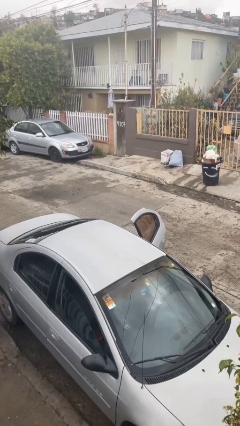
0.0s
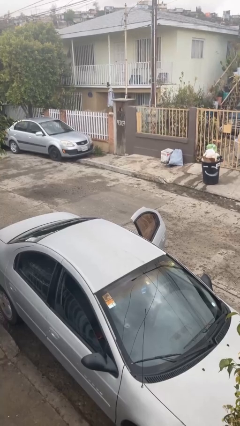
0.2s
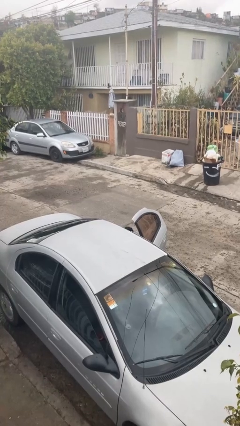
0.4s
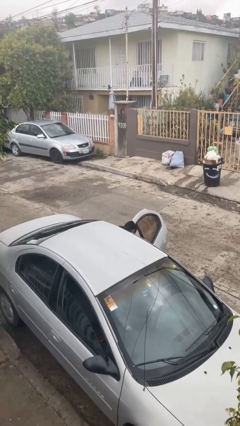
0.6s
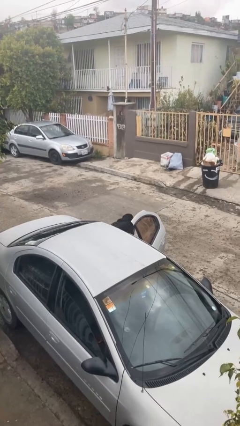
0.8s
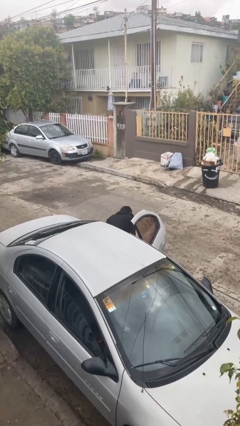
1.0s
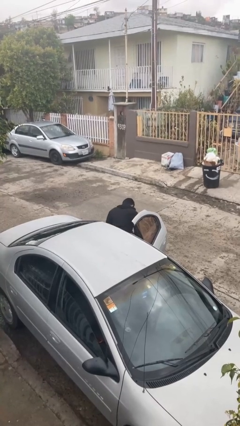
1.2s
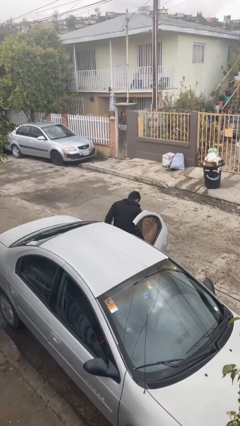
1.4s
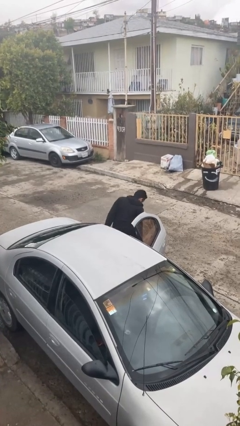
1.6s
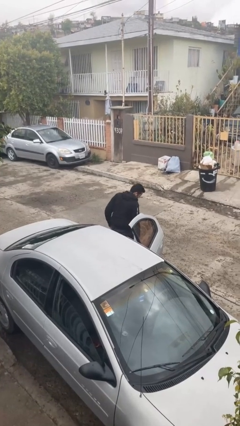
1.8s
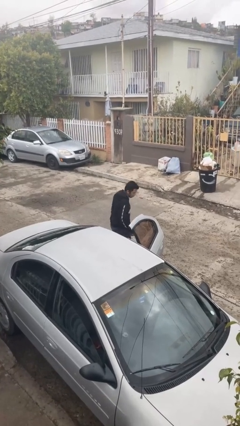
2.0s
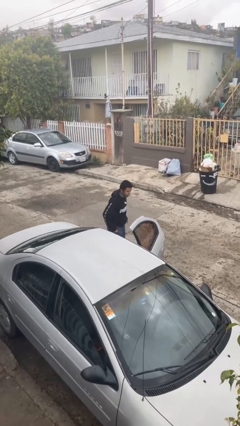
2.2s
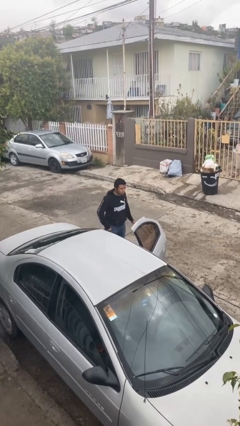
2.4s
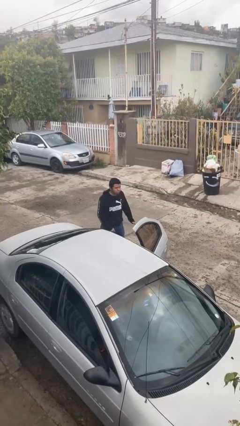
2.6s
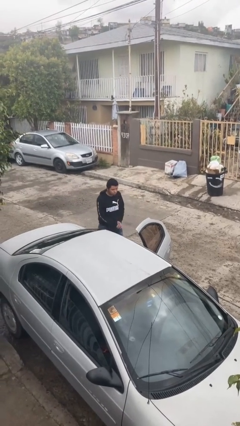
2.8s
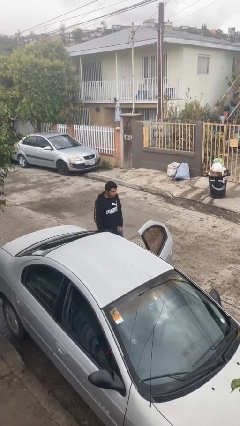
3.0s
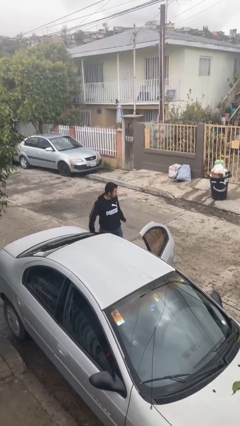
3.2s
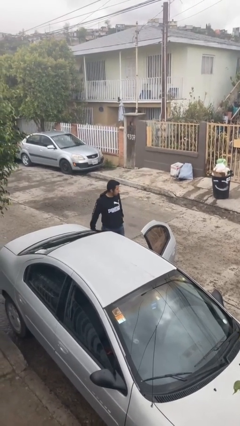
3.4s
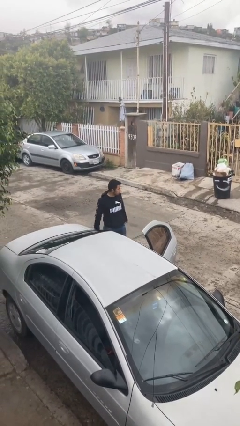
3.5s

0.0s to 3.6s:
person exits car

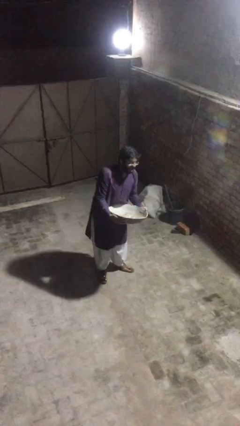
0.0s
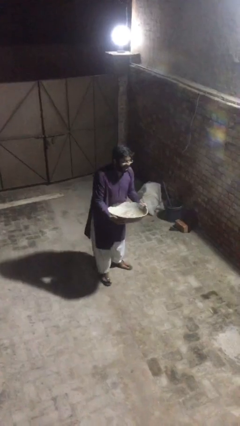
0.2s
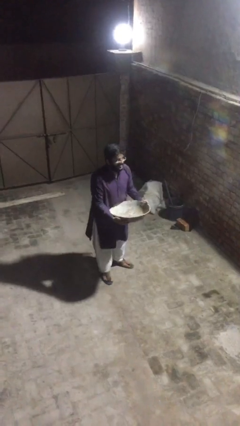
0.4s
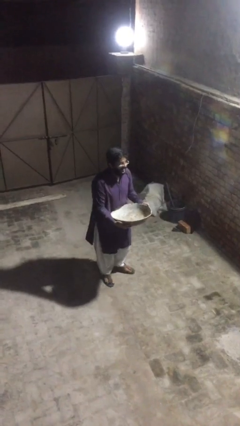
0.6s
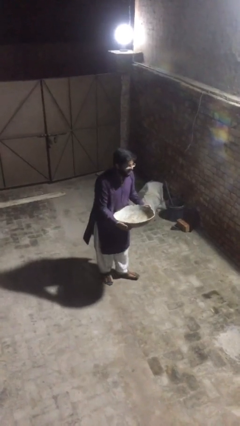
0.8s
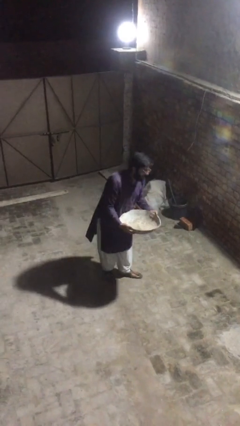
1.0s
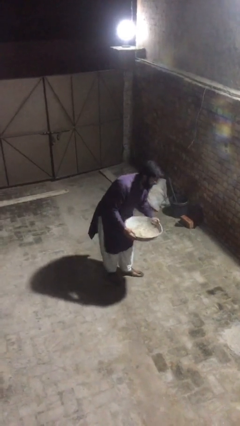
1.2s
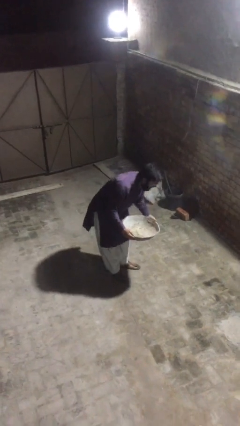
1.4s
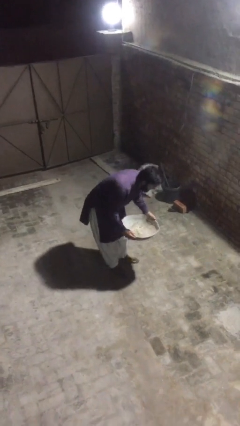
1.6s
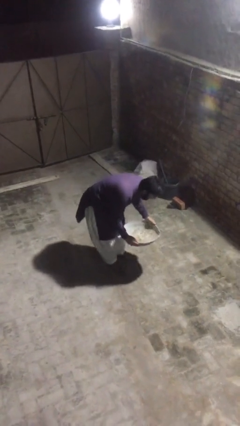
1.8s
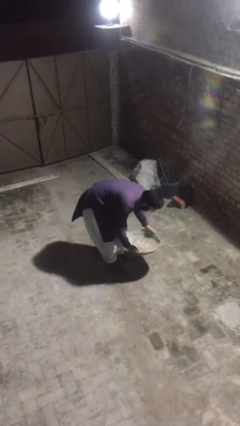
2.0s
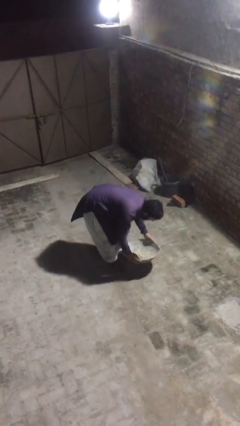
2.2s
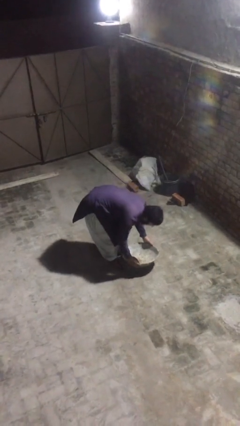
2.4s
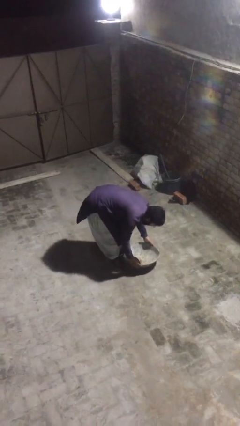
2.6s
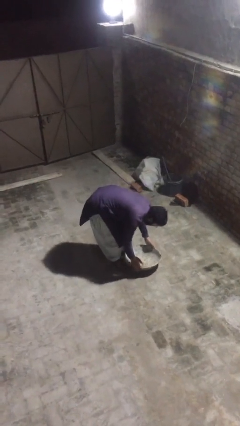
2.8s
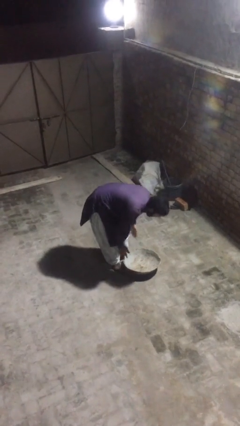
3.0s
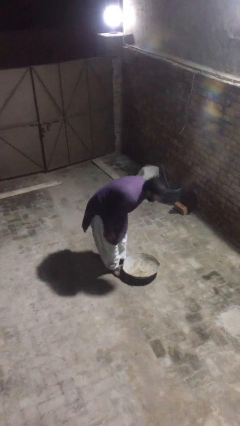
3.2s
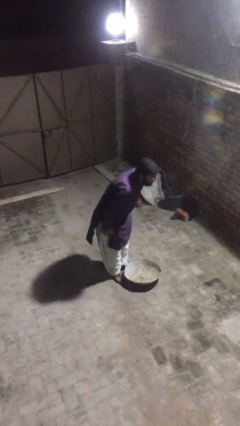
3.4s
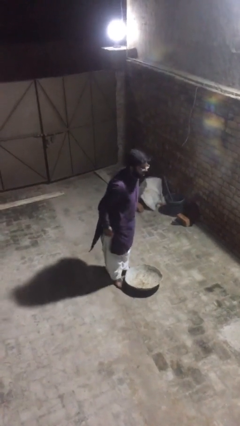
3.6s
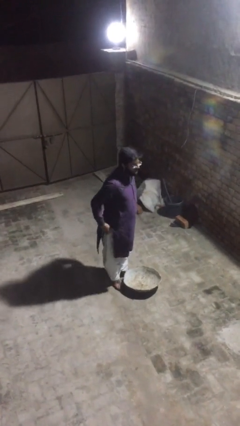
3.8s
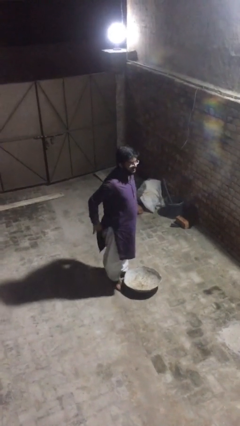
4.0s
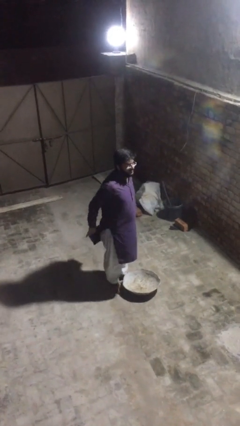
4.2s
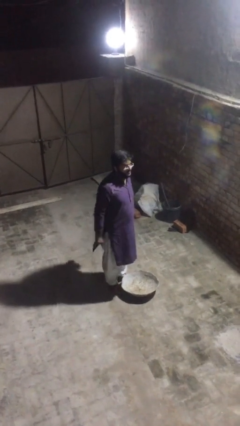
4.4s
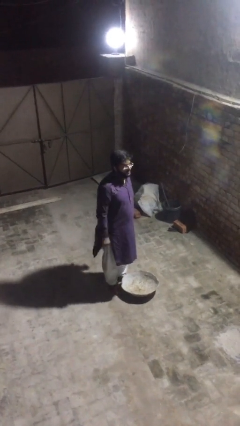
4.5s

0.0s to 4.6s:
person puts down object on floor

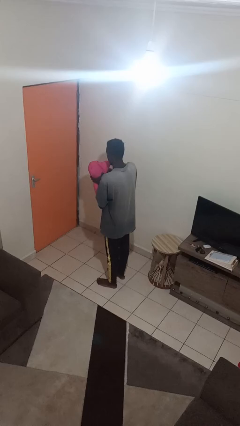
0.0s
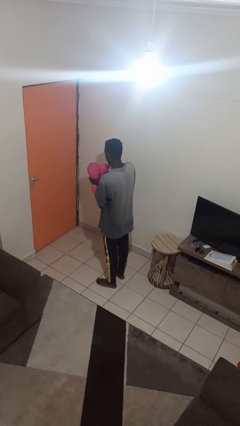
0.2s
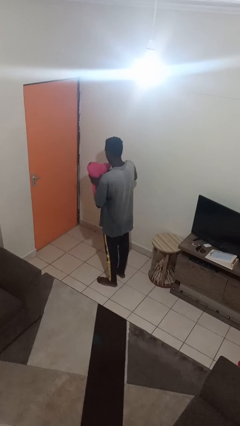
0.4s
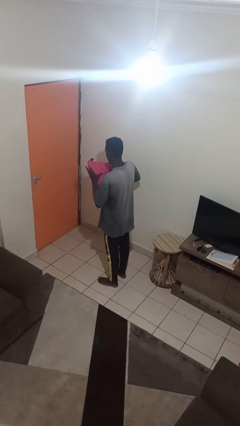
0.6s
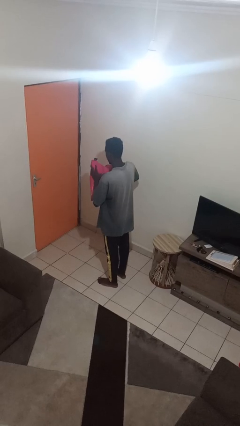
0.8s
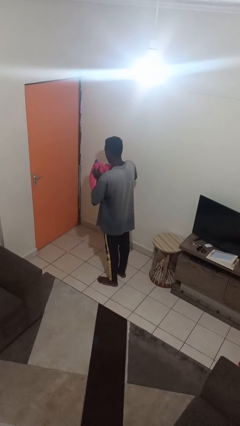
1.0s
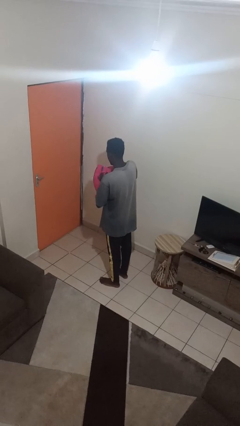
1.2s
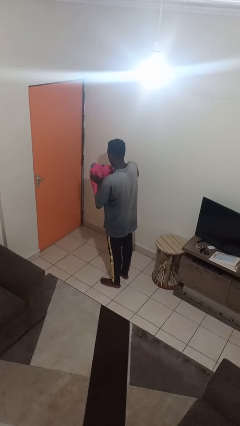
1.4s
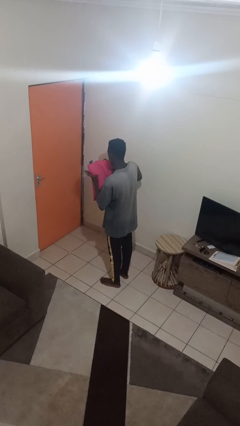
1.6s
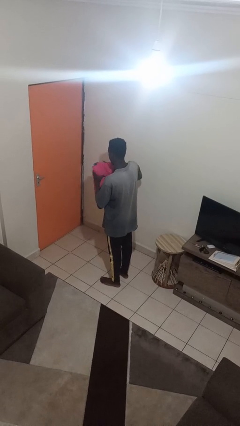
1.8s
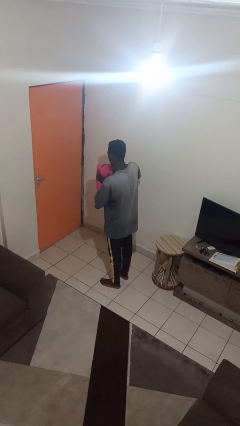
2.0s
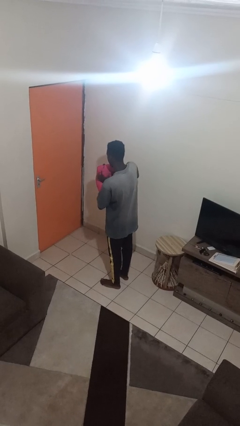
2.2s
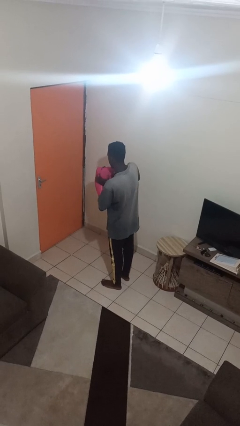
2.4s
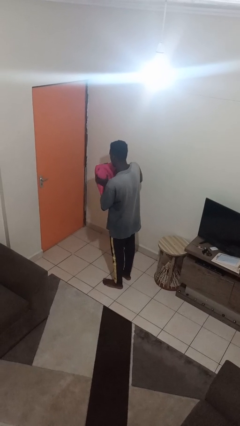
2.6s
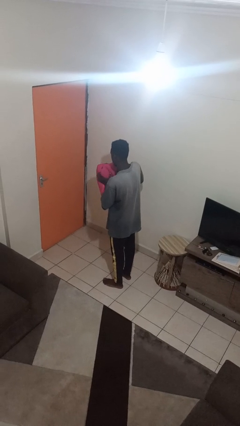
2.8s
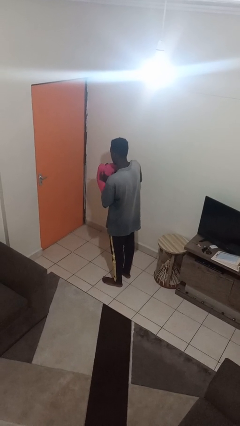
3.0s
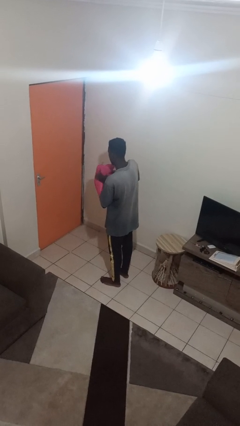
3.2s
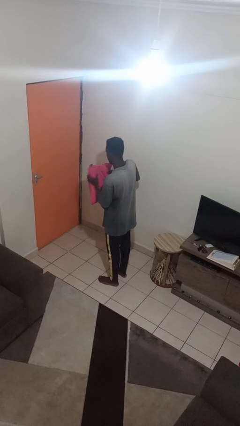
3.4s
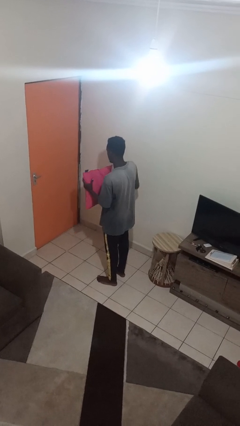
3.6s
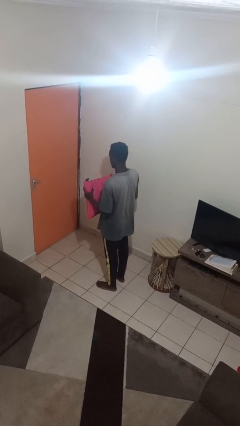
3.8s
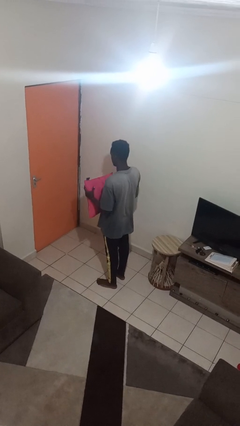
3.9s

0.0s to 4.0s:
person squeezes object

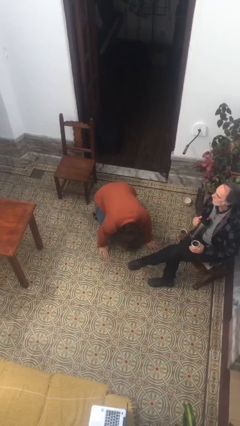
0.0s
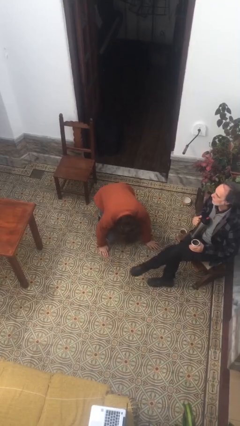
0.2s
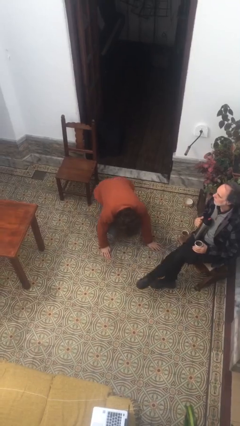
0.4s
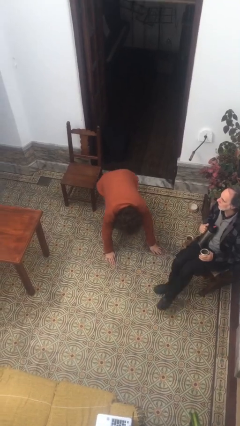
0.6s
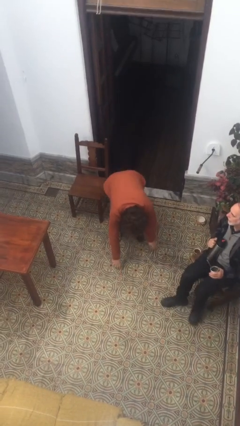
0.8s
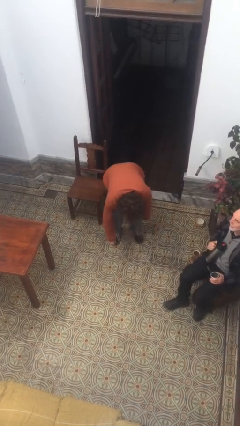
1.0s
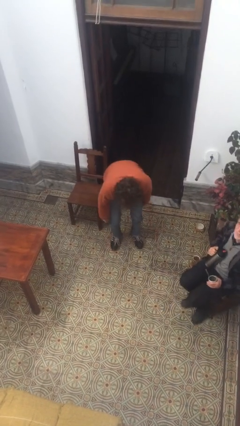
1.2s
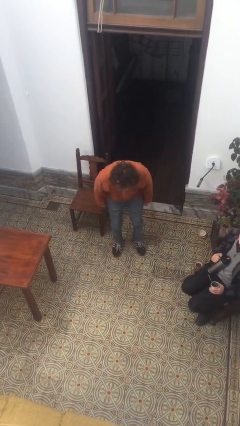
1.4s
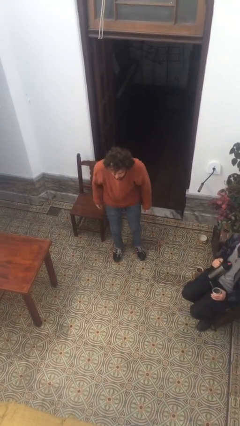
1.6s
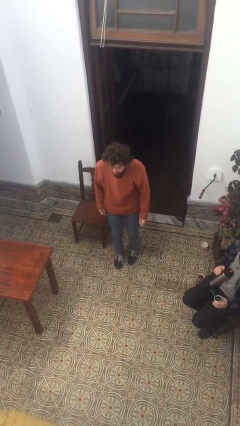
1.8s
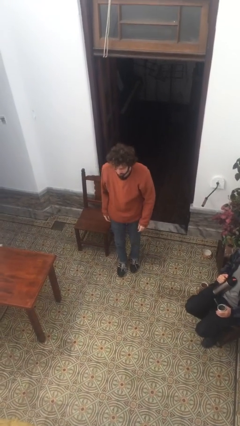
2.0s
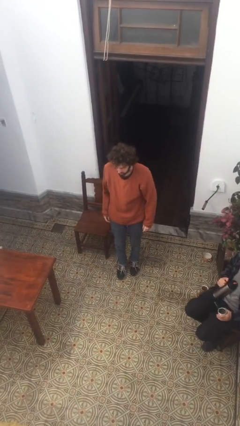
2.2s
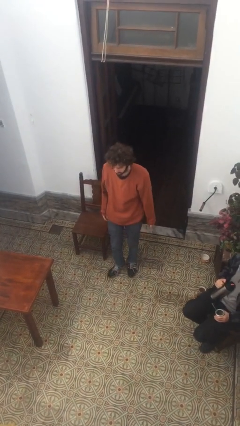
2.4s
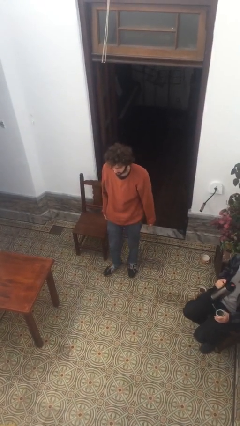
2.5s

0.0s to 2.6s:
person stands up from floor

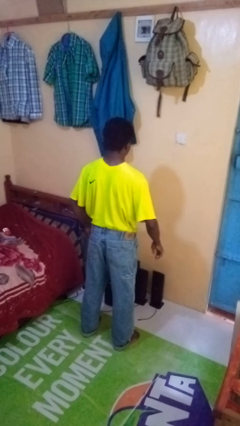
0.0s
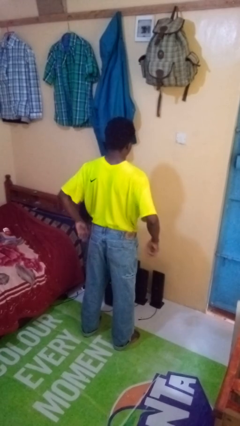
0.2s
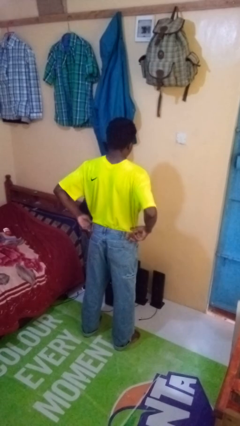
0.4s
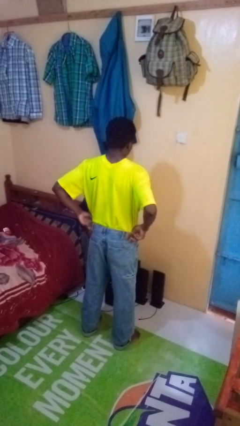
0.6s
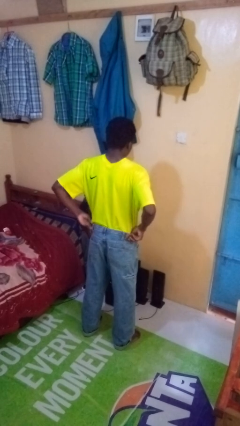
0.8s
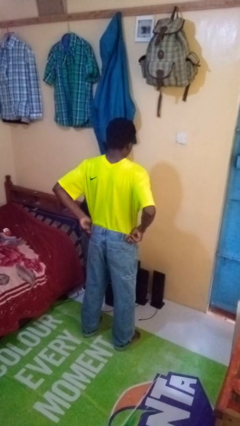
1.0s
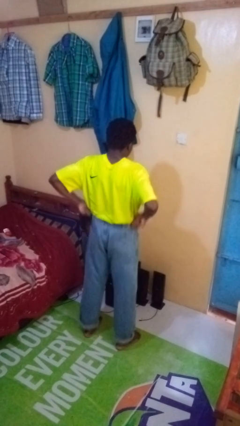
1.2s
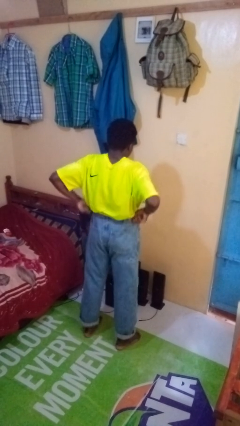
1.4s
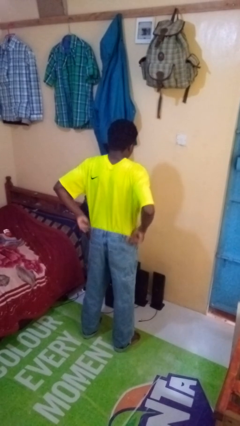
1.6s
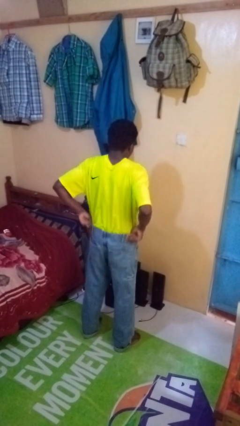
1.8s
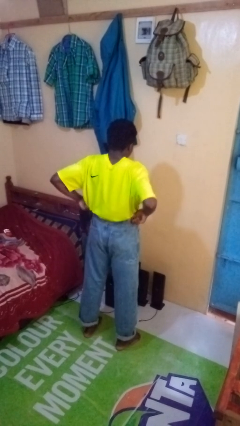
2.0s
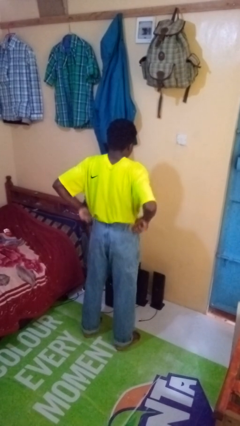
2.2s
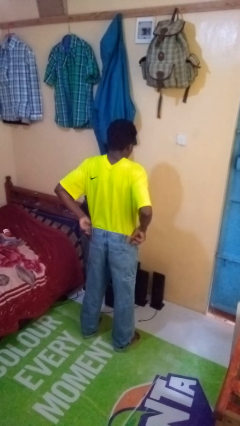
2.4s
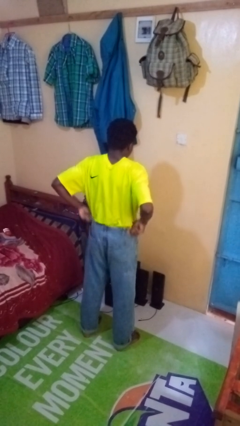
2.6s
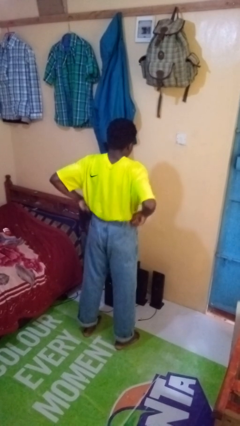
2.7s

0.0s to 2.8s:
person hikes up pants
